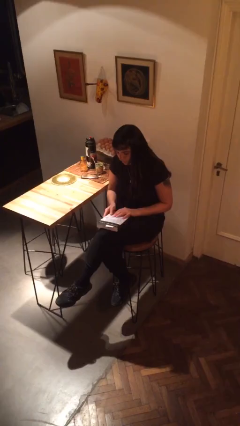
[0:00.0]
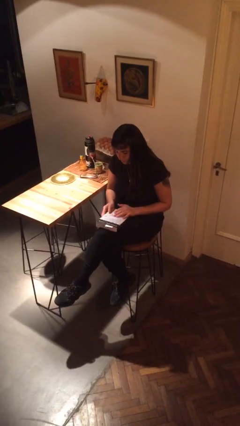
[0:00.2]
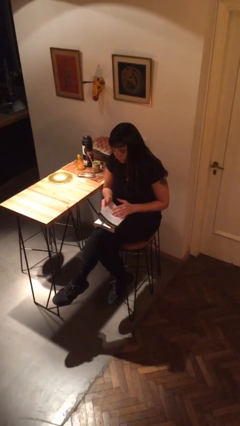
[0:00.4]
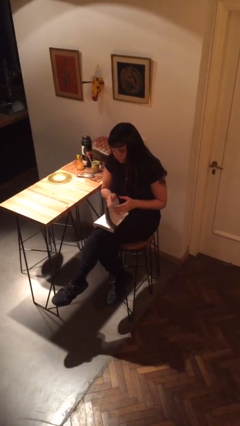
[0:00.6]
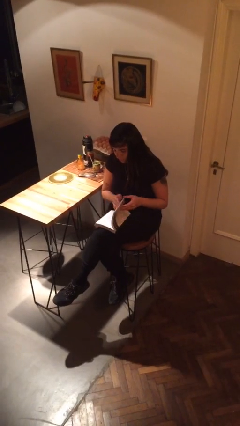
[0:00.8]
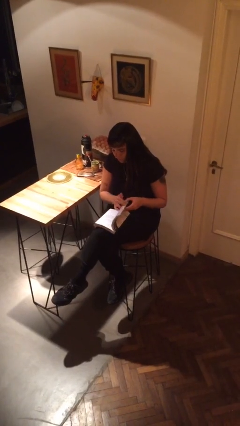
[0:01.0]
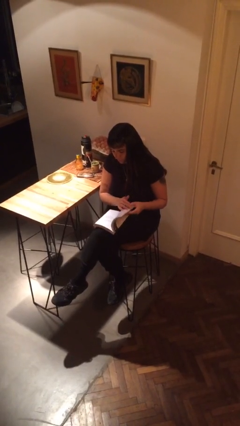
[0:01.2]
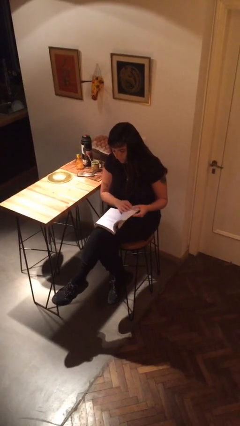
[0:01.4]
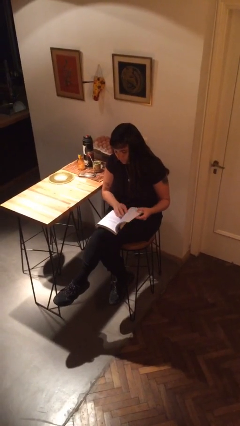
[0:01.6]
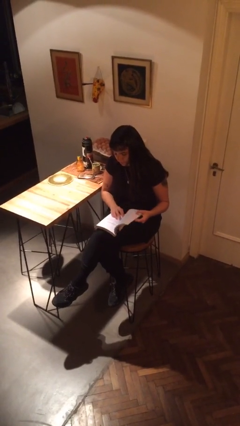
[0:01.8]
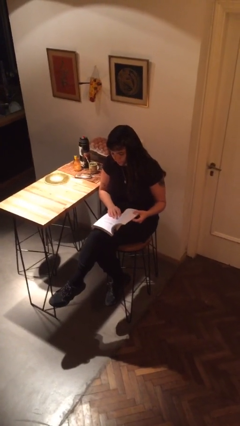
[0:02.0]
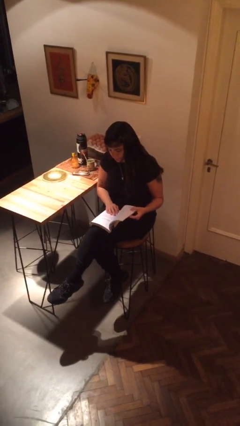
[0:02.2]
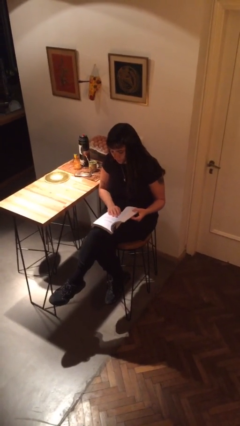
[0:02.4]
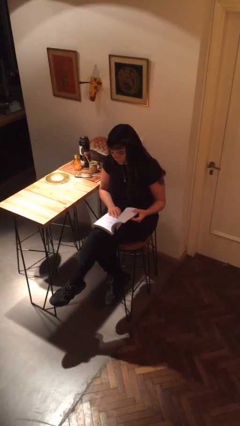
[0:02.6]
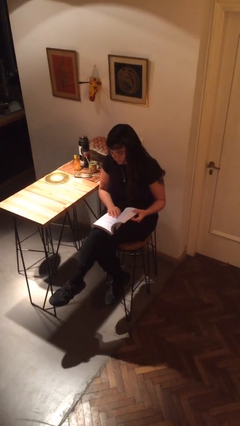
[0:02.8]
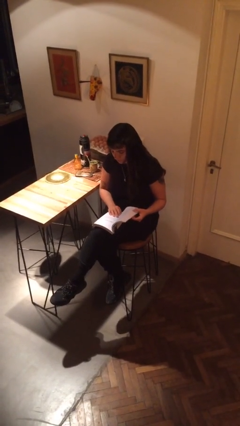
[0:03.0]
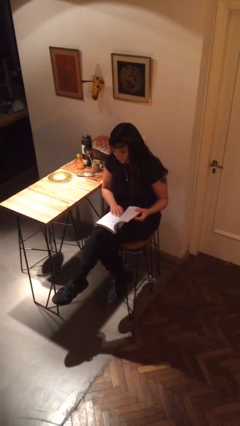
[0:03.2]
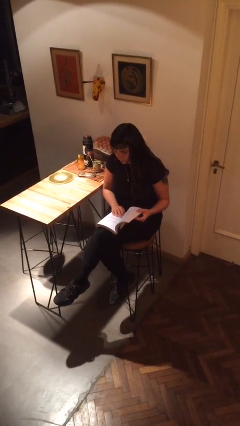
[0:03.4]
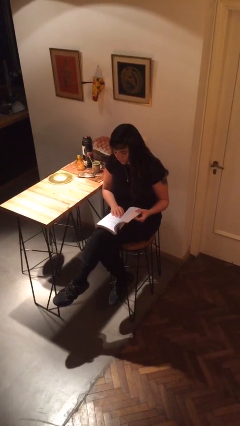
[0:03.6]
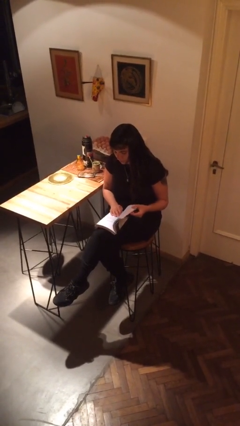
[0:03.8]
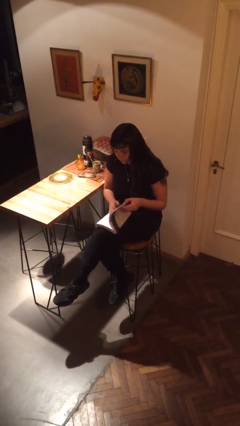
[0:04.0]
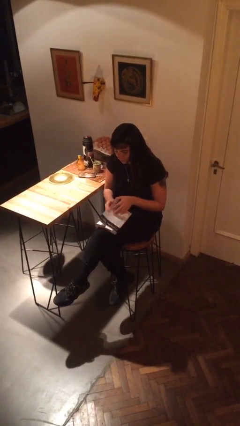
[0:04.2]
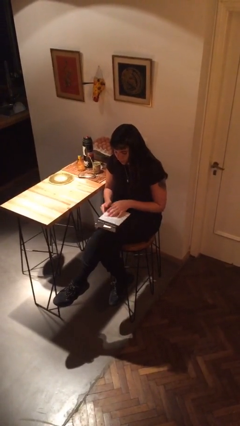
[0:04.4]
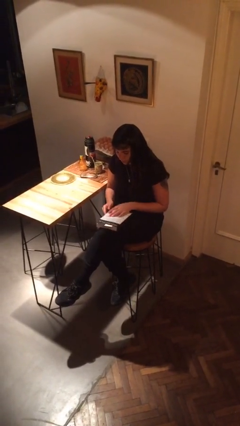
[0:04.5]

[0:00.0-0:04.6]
person reads book

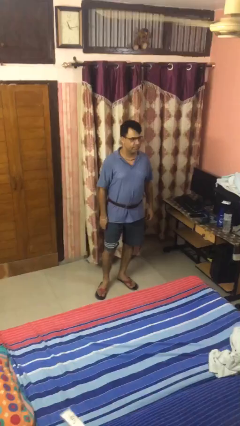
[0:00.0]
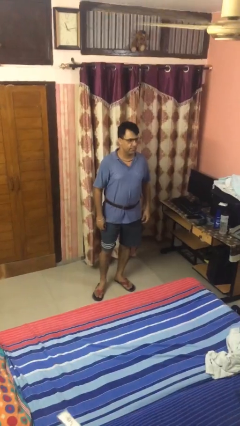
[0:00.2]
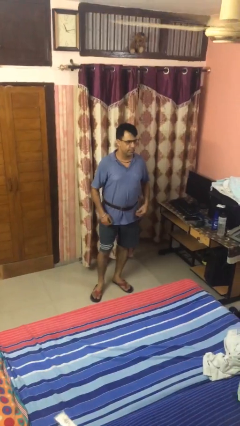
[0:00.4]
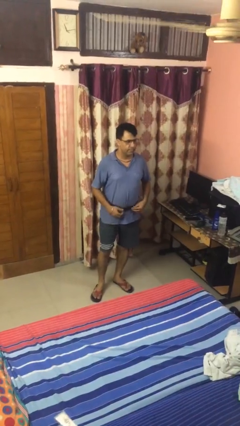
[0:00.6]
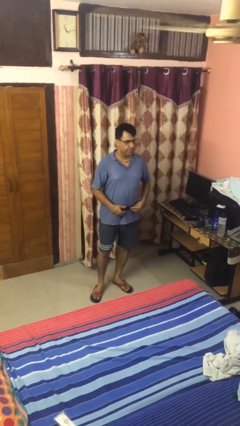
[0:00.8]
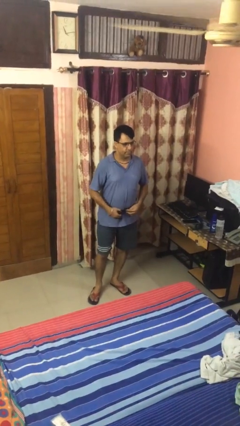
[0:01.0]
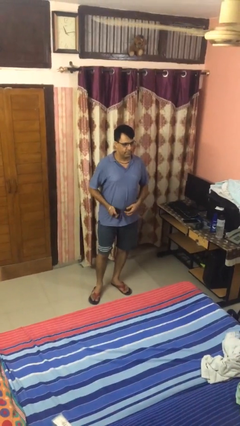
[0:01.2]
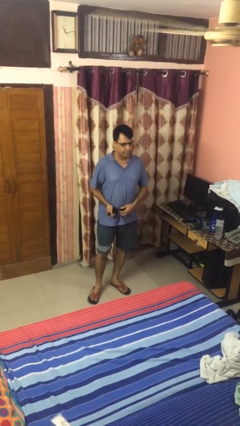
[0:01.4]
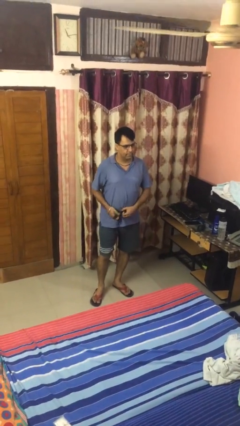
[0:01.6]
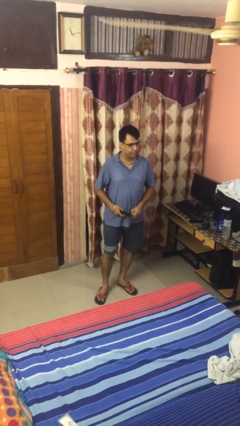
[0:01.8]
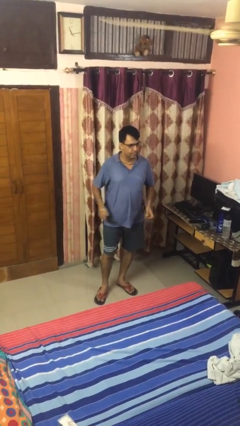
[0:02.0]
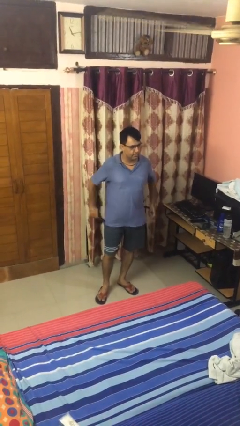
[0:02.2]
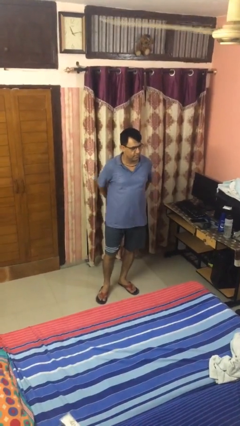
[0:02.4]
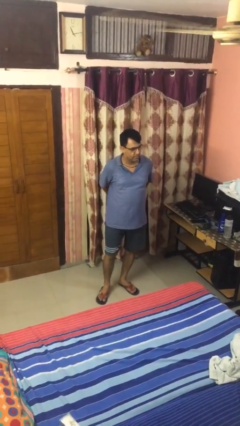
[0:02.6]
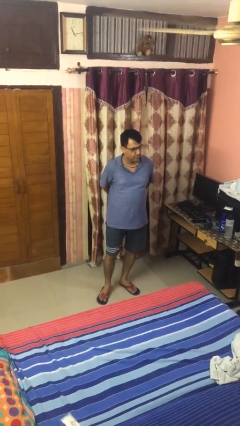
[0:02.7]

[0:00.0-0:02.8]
person takes off belt

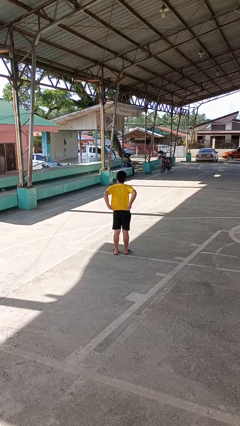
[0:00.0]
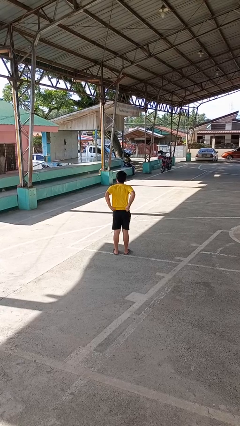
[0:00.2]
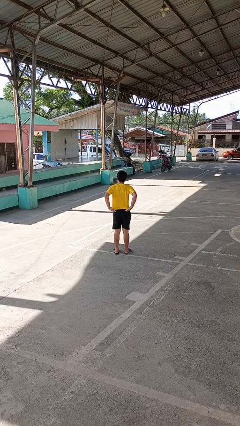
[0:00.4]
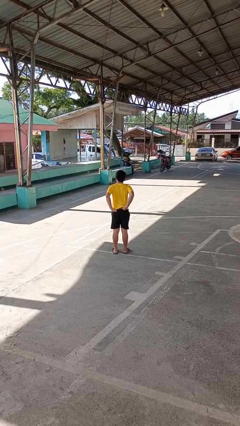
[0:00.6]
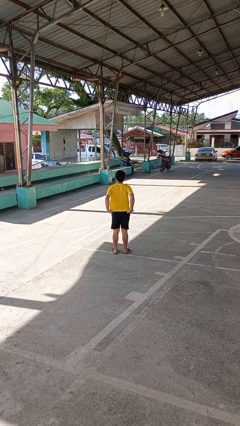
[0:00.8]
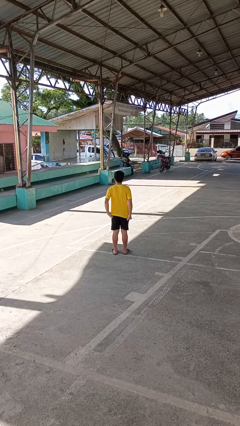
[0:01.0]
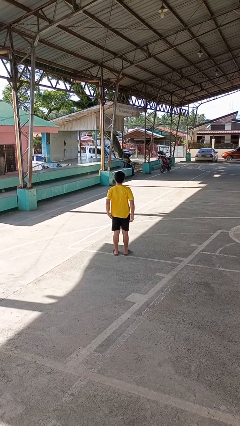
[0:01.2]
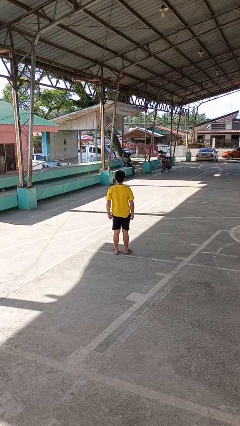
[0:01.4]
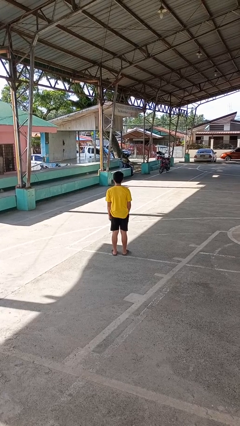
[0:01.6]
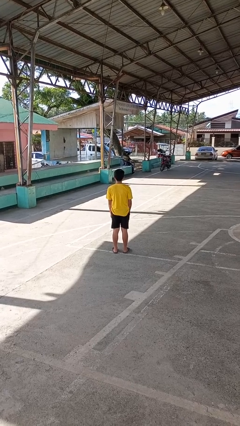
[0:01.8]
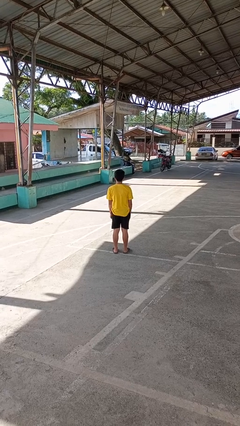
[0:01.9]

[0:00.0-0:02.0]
person untucks shirt

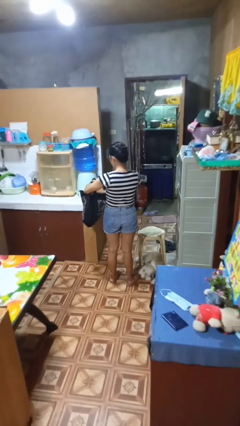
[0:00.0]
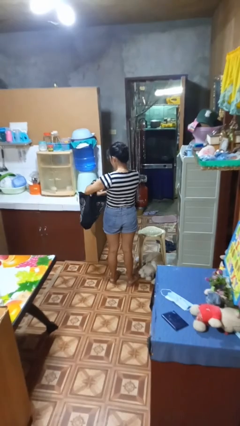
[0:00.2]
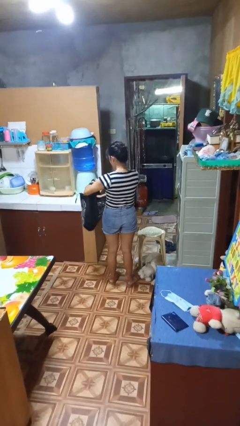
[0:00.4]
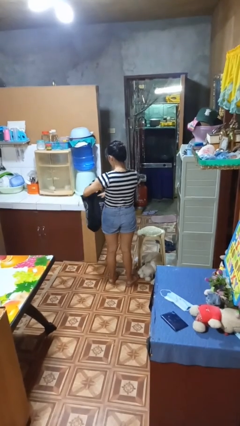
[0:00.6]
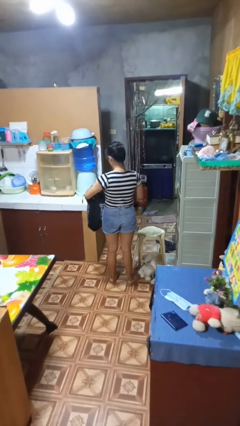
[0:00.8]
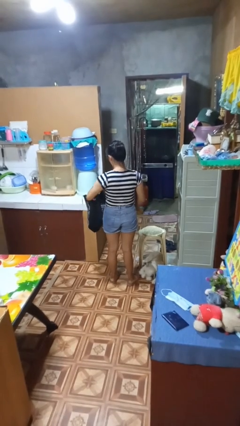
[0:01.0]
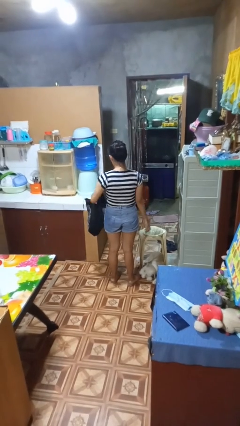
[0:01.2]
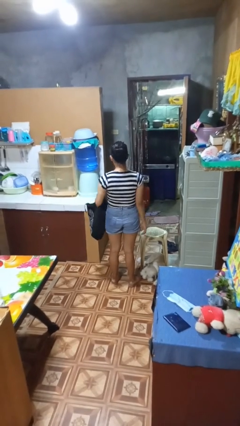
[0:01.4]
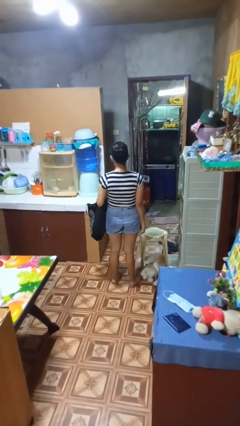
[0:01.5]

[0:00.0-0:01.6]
person puts object into bag

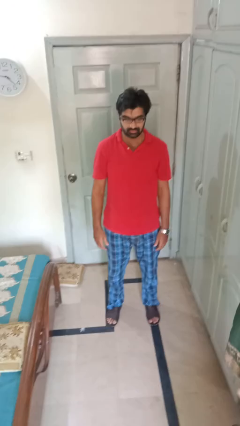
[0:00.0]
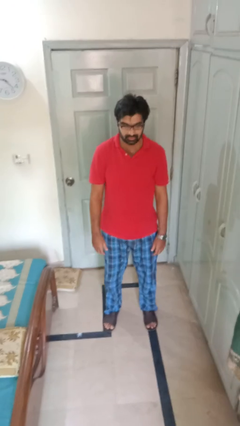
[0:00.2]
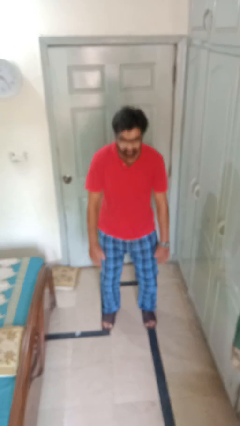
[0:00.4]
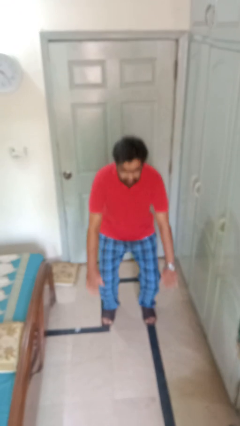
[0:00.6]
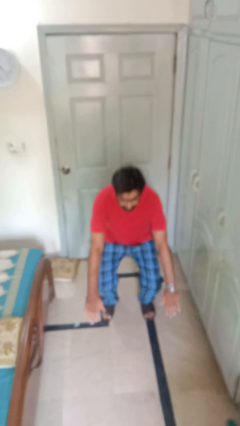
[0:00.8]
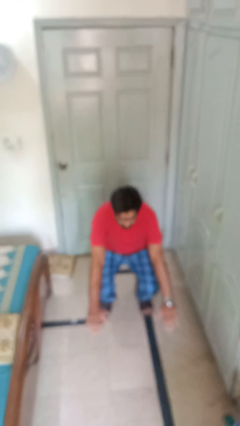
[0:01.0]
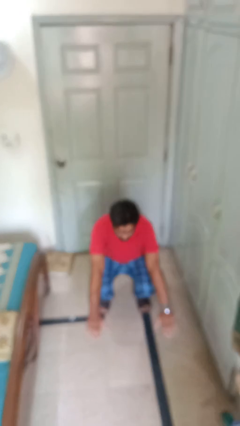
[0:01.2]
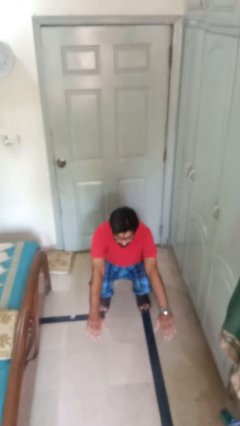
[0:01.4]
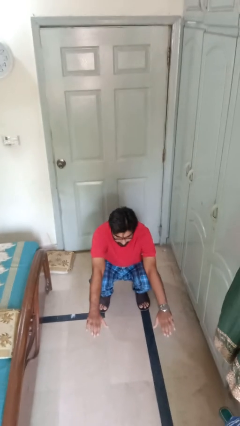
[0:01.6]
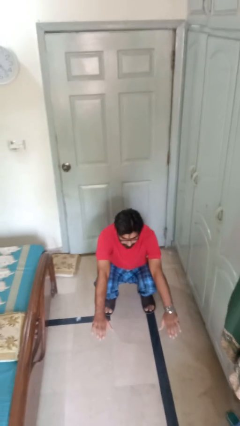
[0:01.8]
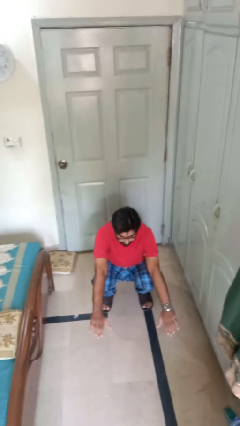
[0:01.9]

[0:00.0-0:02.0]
person squats

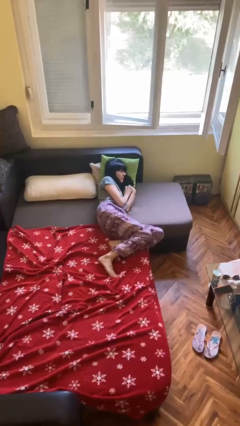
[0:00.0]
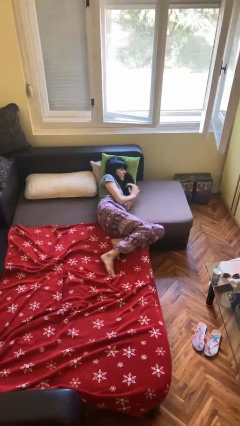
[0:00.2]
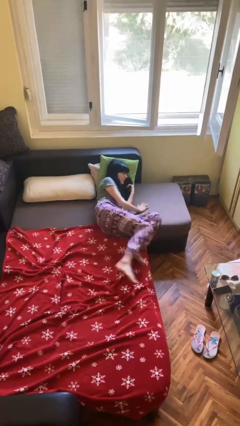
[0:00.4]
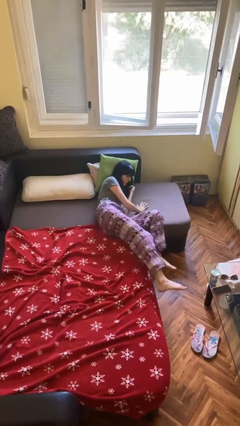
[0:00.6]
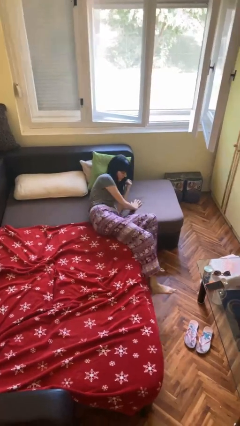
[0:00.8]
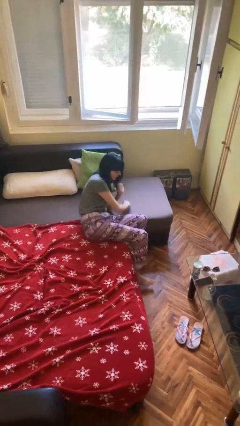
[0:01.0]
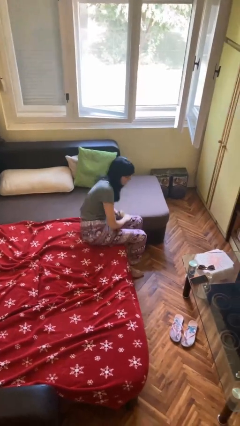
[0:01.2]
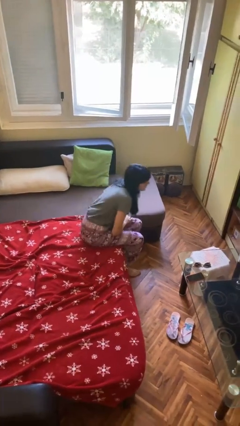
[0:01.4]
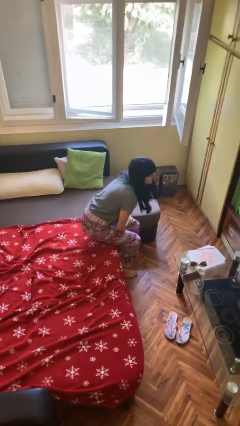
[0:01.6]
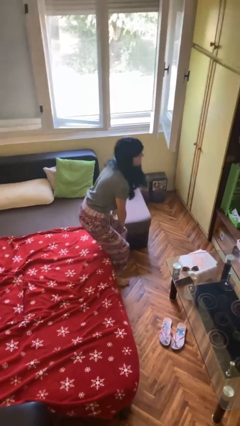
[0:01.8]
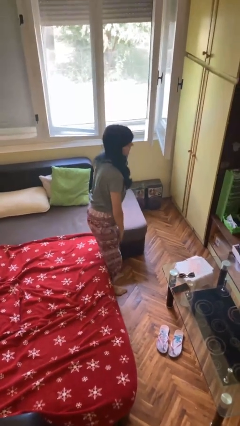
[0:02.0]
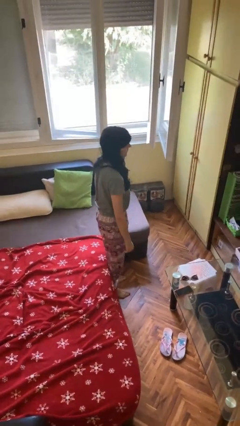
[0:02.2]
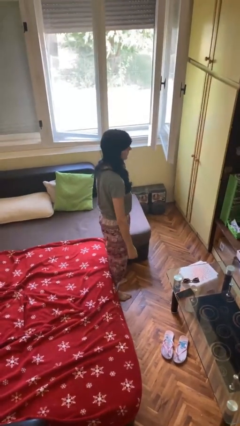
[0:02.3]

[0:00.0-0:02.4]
person stands up

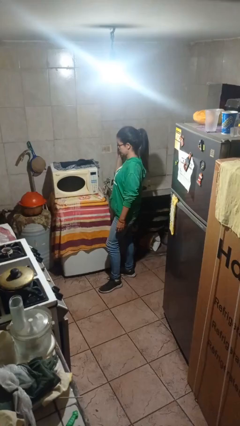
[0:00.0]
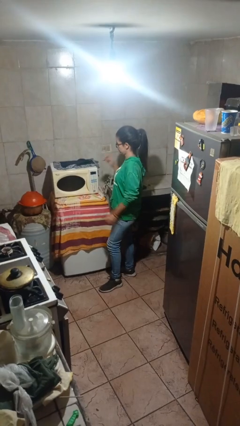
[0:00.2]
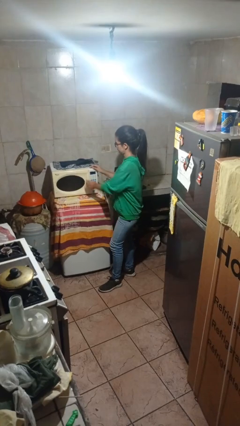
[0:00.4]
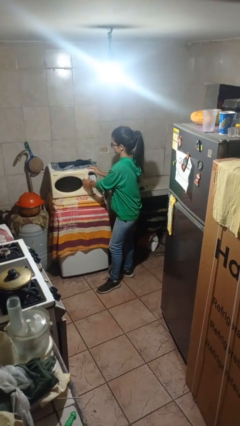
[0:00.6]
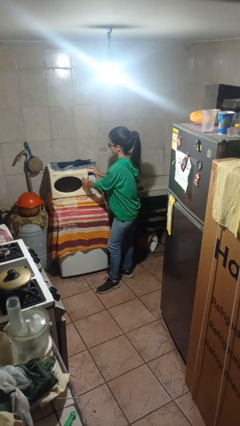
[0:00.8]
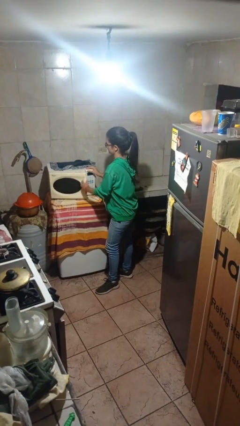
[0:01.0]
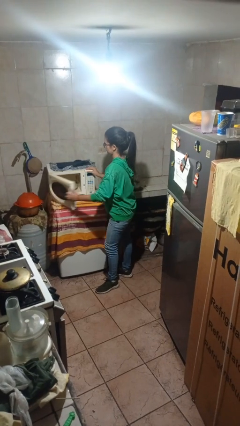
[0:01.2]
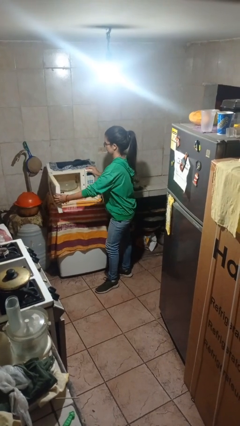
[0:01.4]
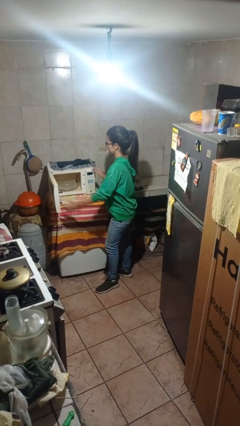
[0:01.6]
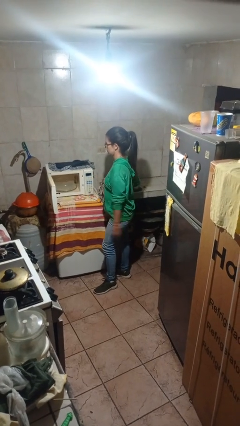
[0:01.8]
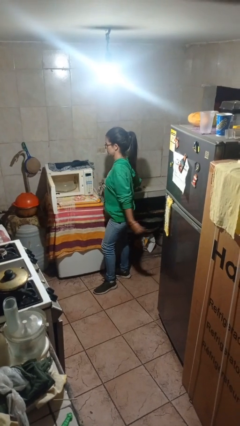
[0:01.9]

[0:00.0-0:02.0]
person opens microwave
